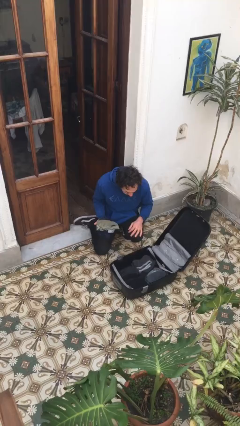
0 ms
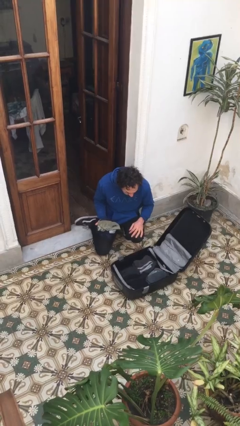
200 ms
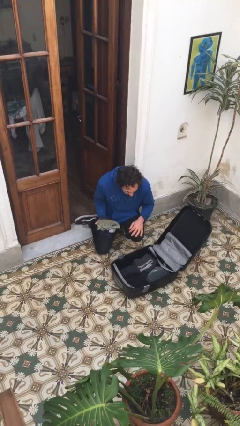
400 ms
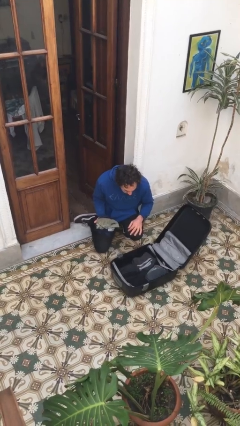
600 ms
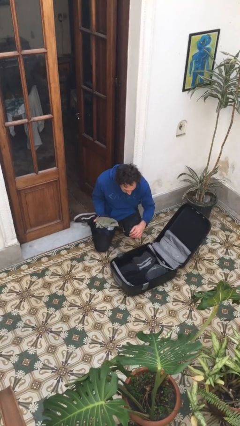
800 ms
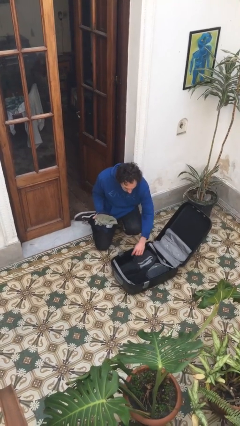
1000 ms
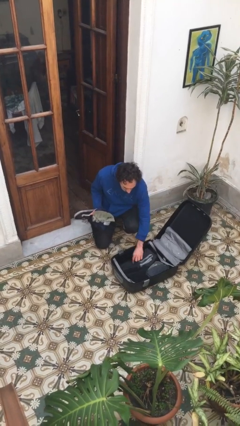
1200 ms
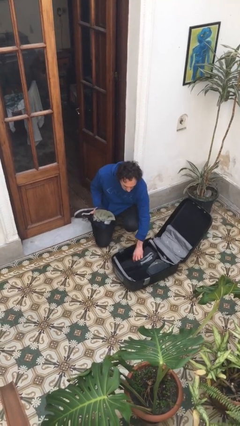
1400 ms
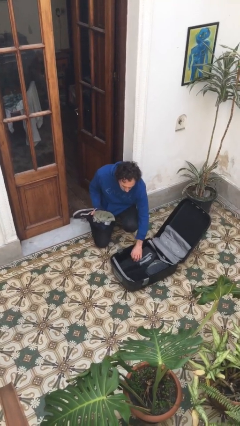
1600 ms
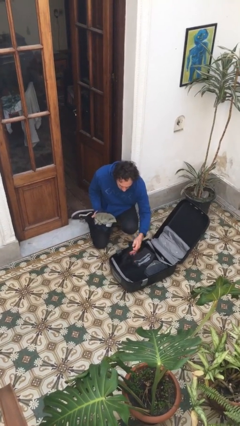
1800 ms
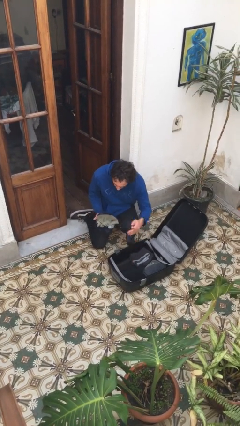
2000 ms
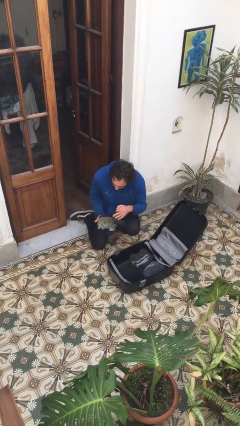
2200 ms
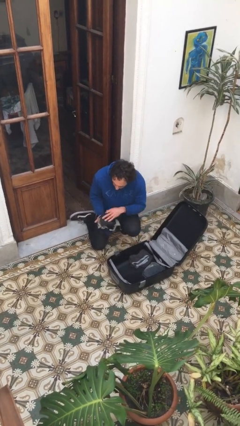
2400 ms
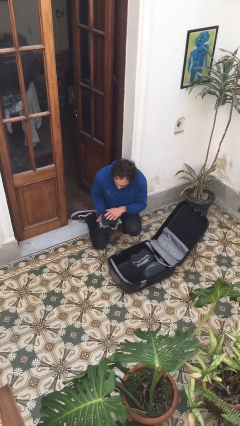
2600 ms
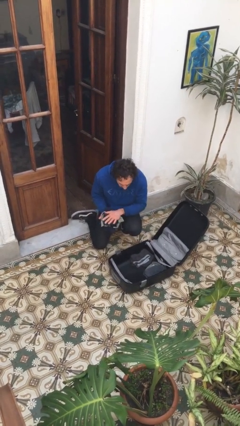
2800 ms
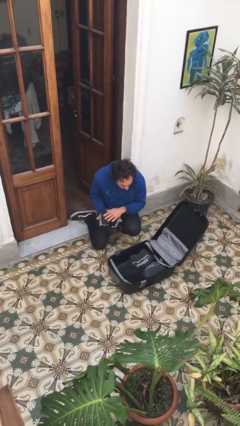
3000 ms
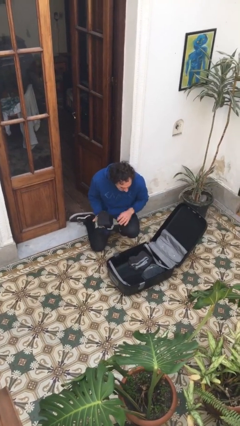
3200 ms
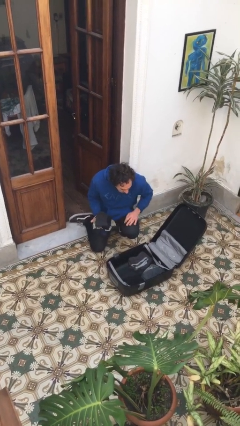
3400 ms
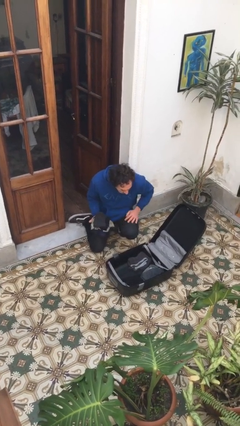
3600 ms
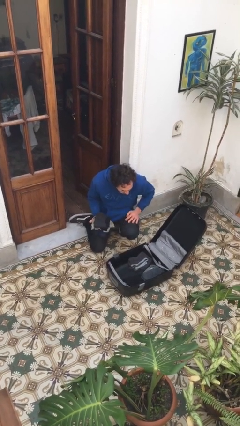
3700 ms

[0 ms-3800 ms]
person unloads clothes from suitcase

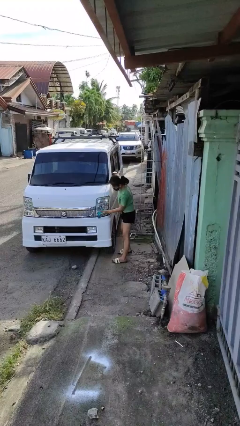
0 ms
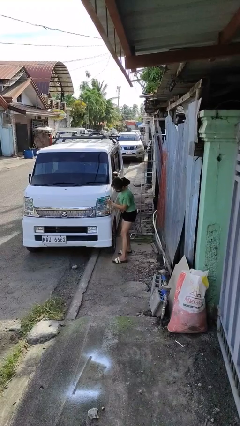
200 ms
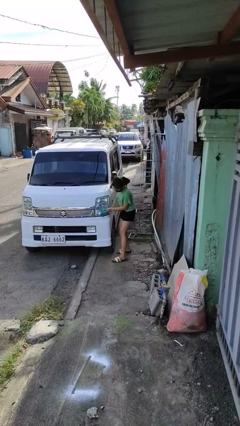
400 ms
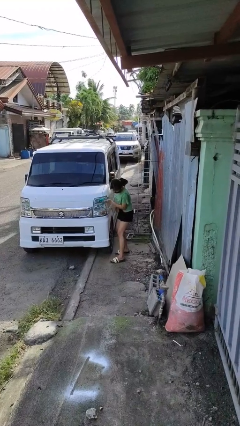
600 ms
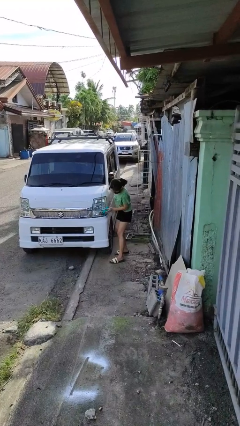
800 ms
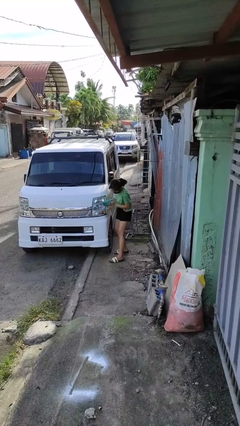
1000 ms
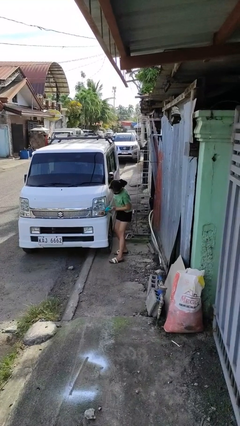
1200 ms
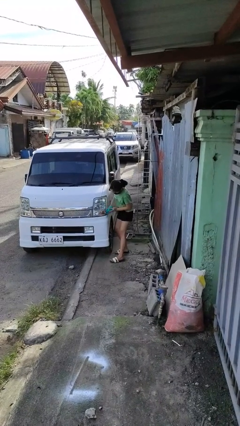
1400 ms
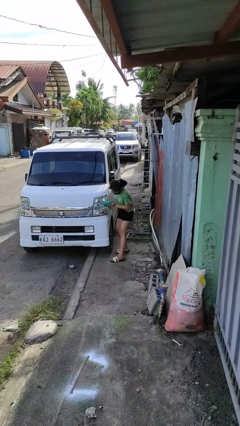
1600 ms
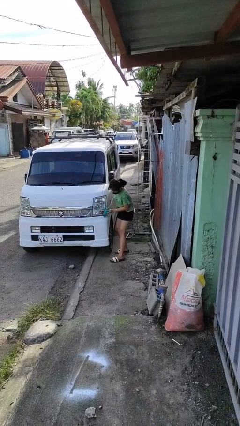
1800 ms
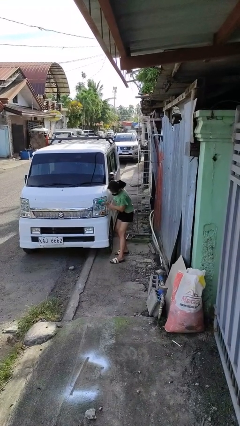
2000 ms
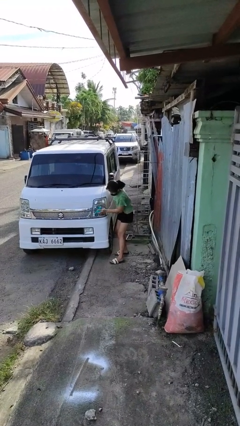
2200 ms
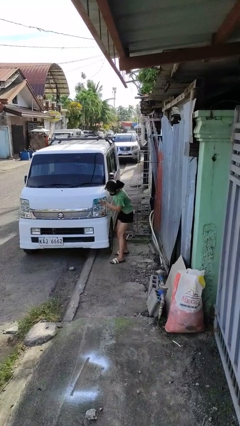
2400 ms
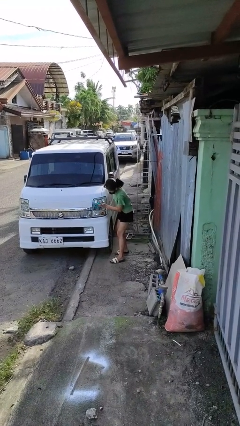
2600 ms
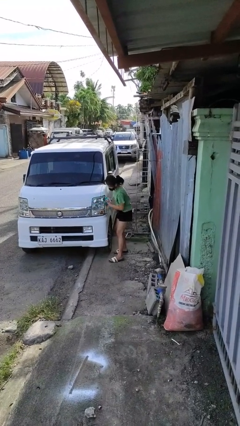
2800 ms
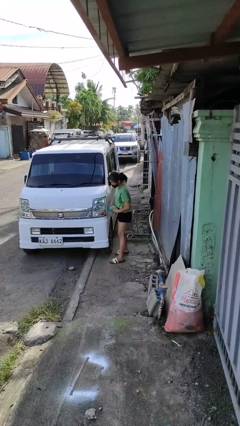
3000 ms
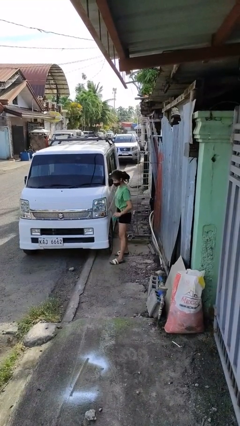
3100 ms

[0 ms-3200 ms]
person polishes car with rag

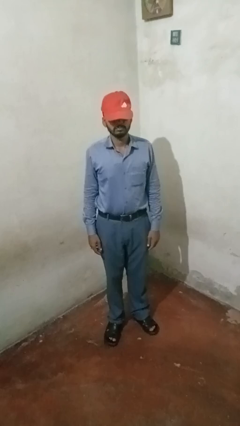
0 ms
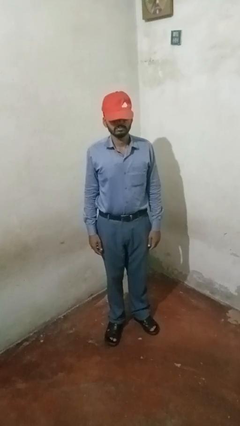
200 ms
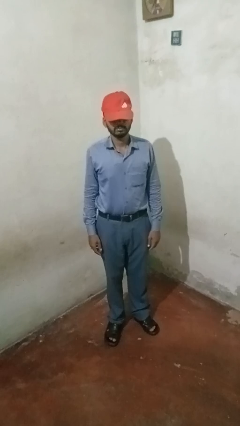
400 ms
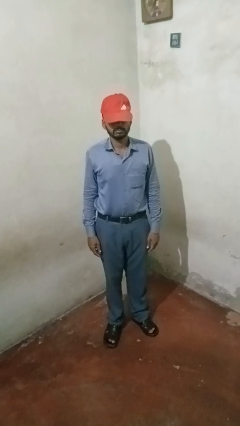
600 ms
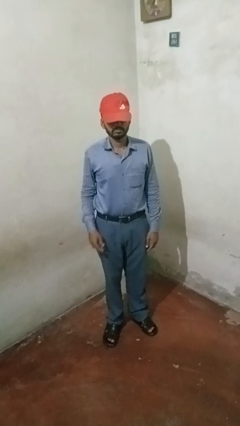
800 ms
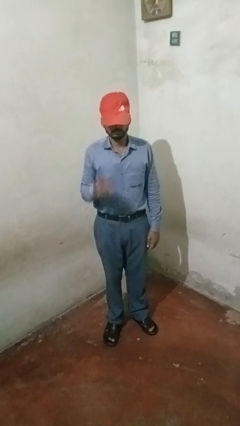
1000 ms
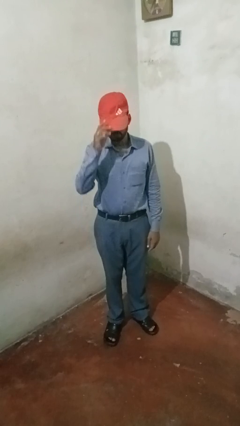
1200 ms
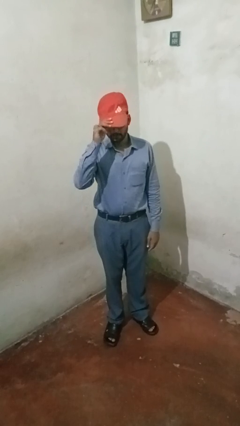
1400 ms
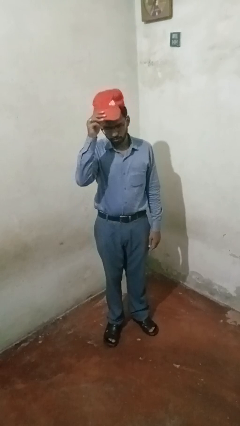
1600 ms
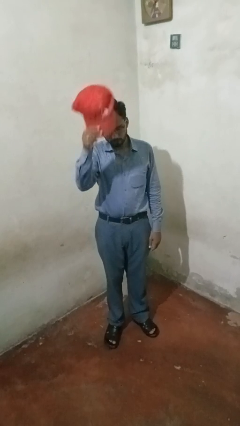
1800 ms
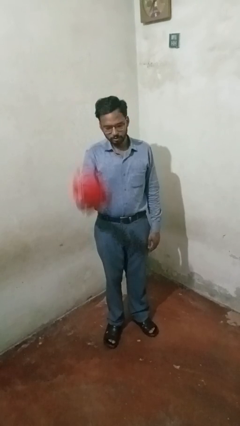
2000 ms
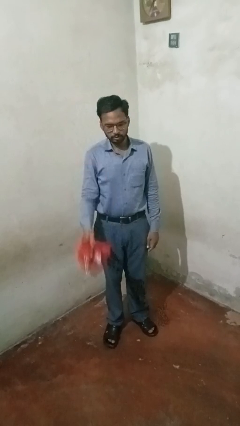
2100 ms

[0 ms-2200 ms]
person takes off hat

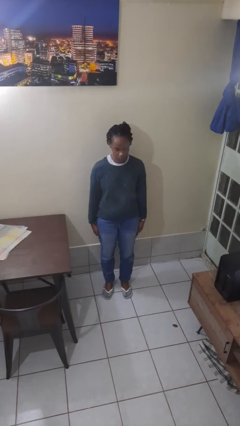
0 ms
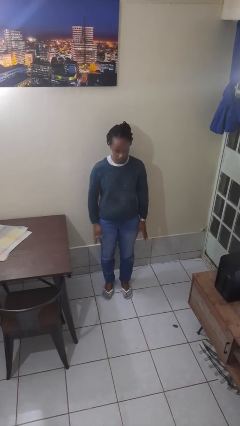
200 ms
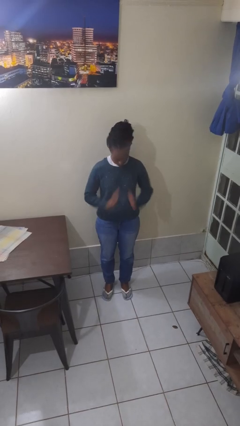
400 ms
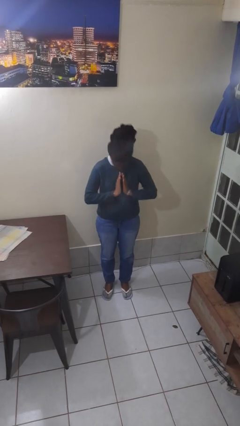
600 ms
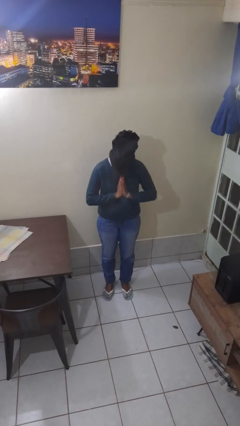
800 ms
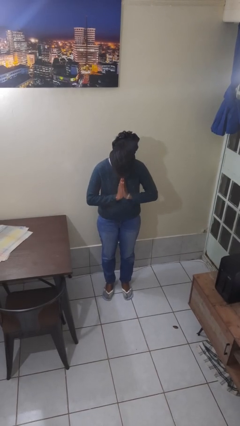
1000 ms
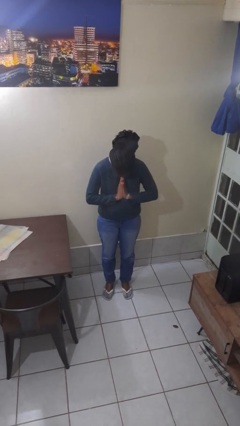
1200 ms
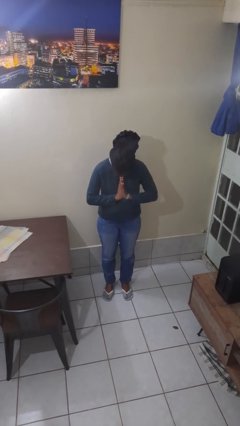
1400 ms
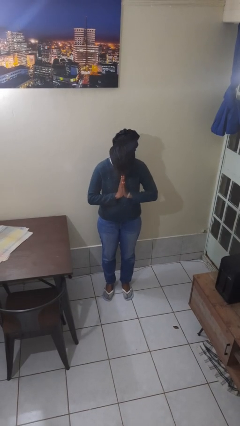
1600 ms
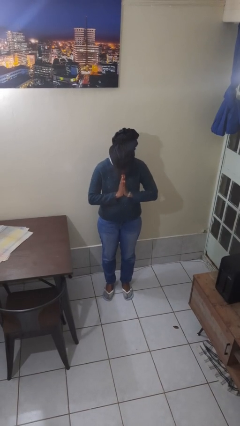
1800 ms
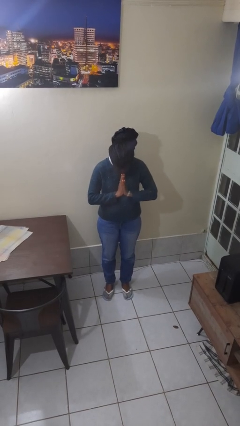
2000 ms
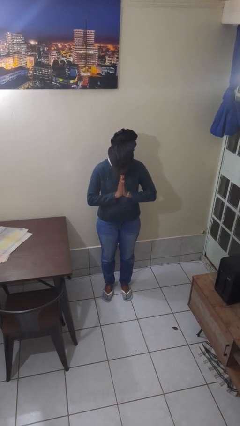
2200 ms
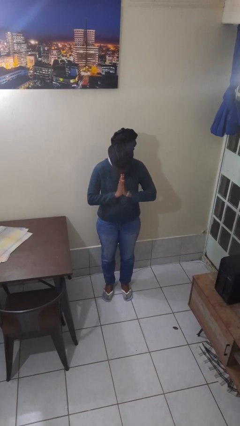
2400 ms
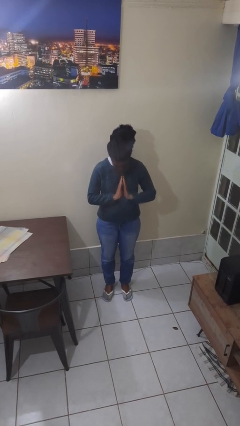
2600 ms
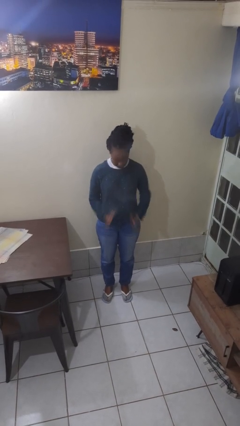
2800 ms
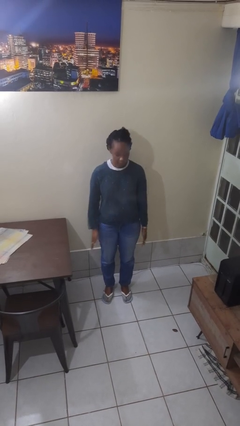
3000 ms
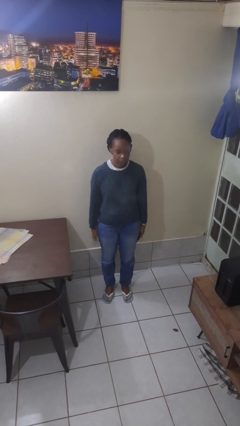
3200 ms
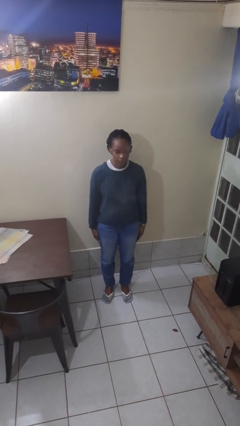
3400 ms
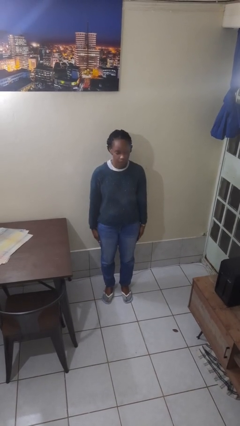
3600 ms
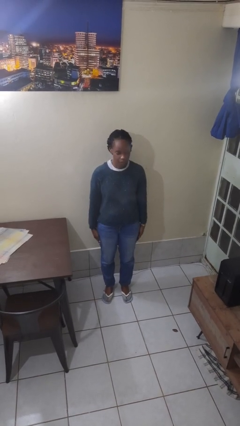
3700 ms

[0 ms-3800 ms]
person prays

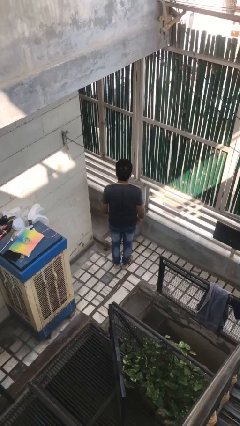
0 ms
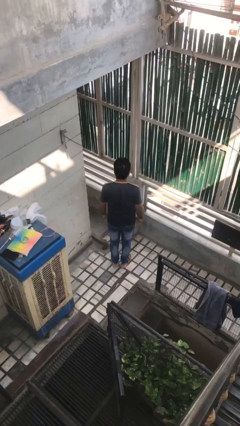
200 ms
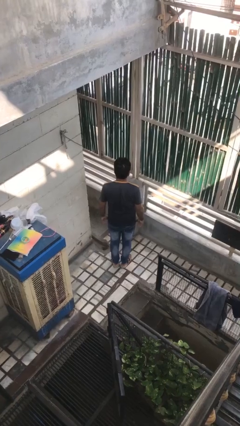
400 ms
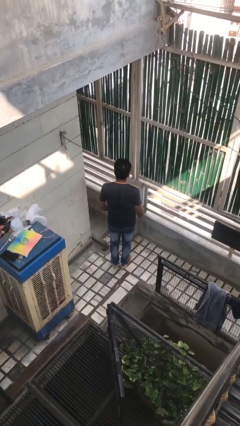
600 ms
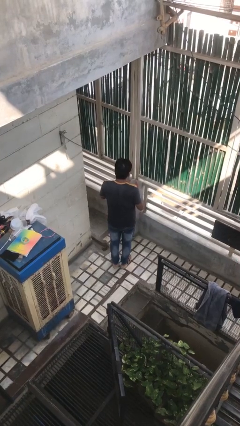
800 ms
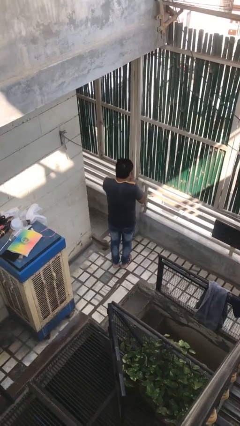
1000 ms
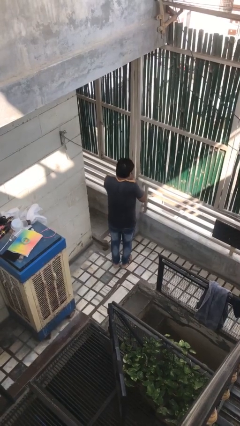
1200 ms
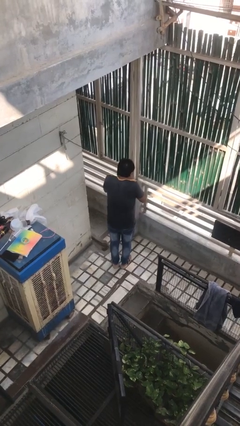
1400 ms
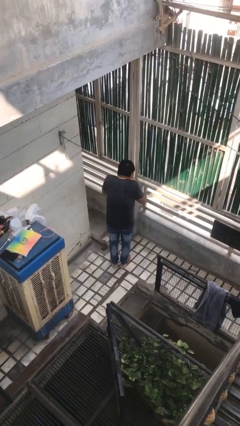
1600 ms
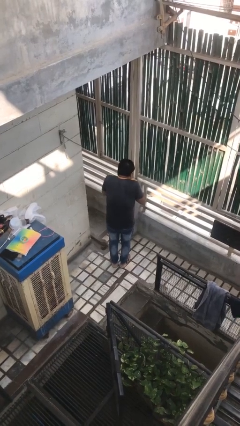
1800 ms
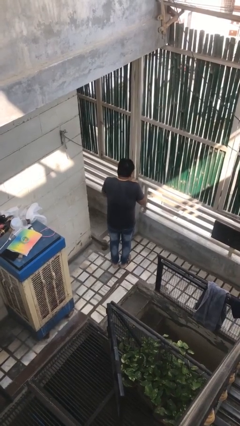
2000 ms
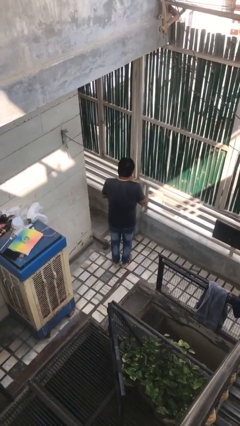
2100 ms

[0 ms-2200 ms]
person sneezes into hand

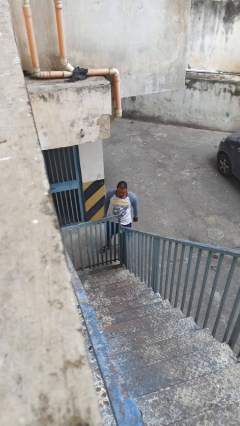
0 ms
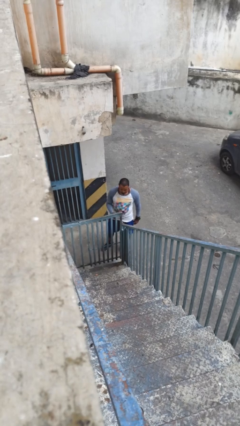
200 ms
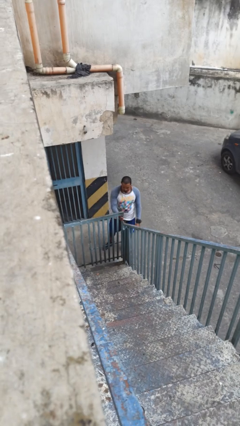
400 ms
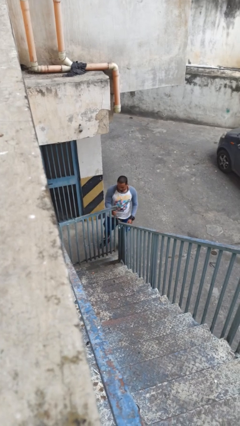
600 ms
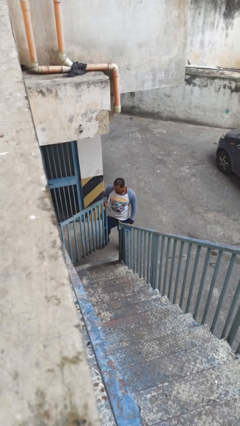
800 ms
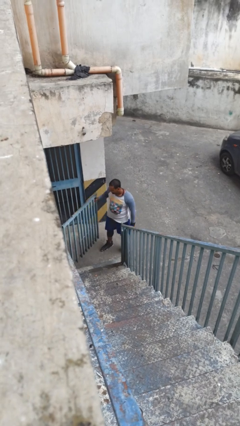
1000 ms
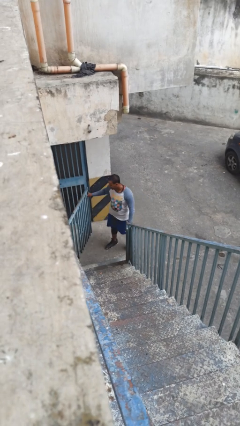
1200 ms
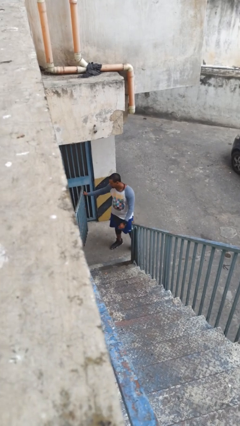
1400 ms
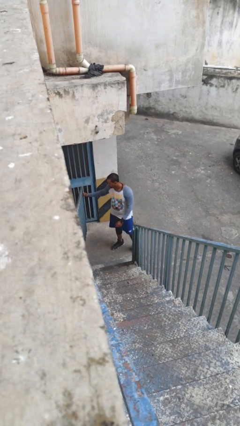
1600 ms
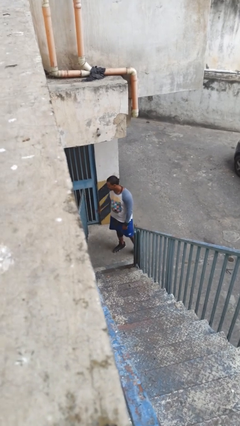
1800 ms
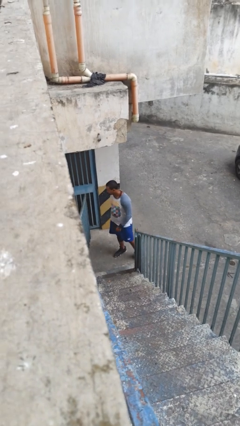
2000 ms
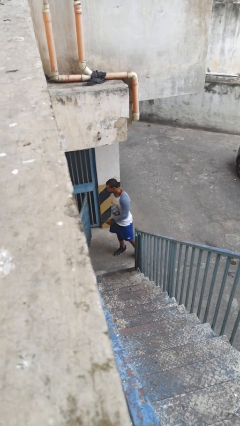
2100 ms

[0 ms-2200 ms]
person opens facility door

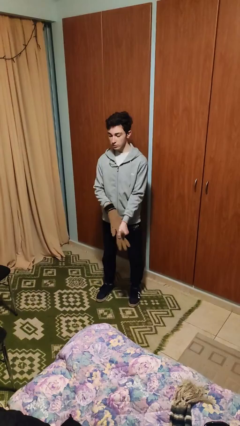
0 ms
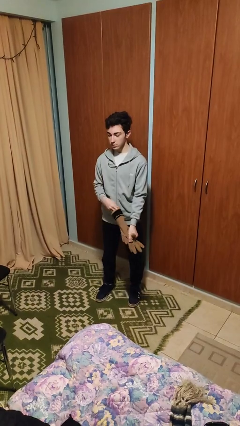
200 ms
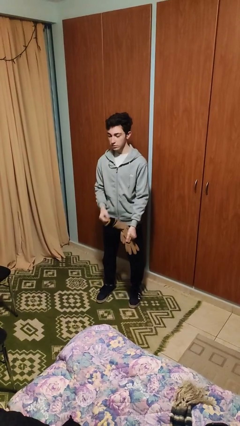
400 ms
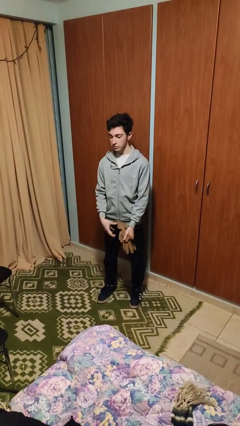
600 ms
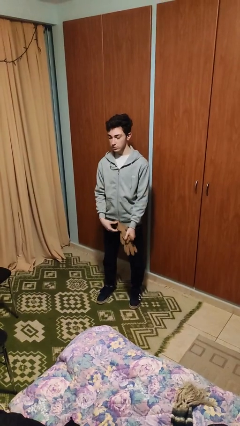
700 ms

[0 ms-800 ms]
person takes off gloves
